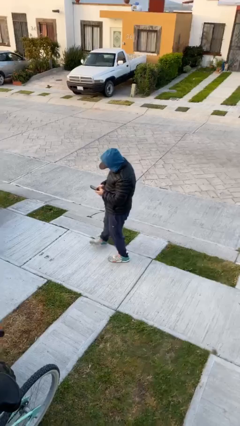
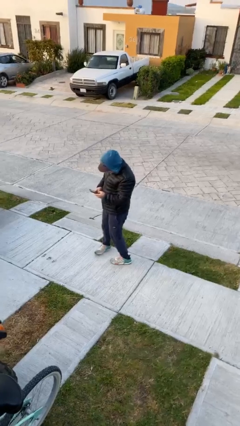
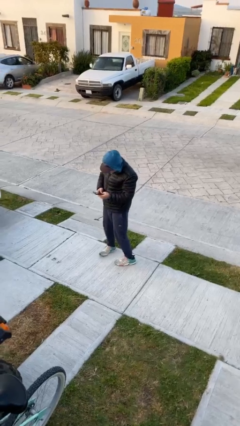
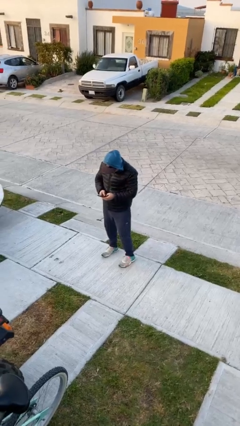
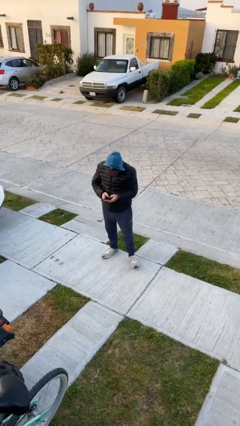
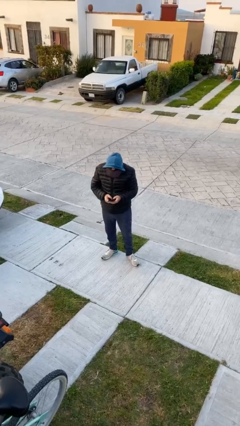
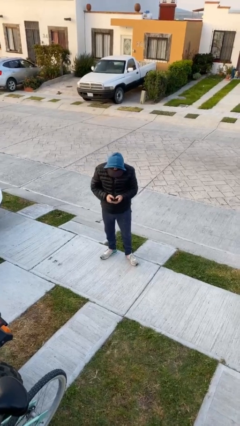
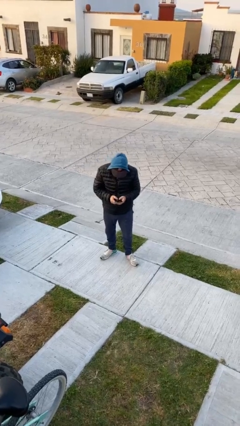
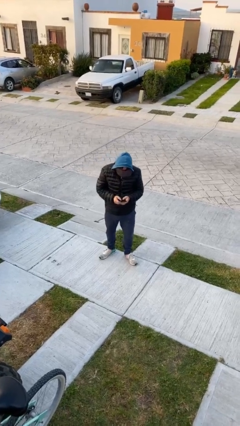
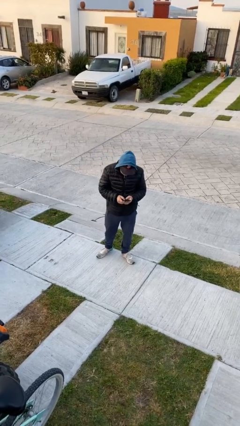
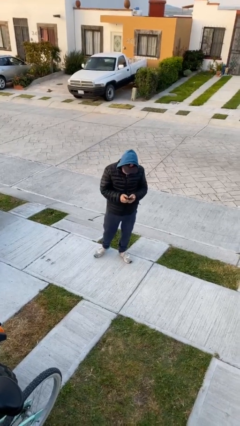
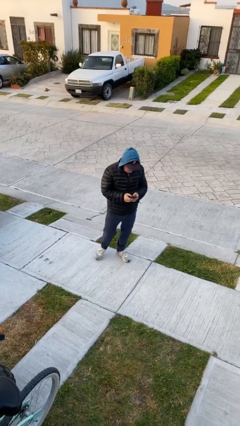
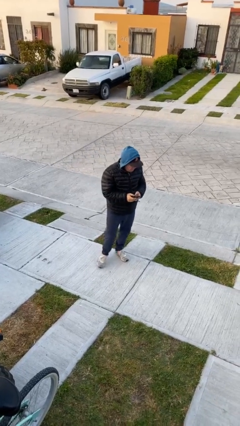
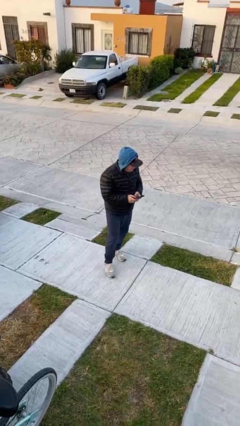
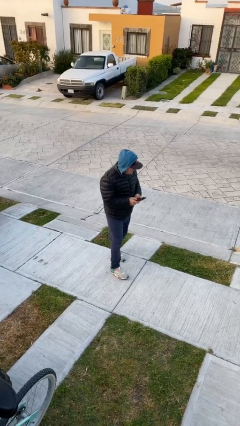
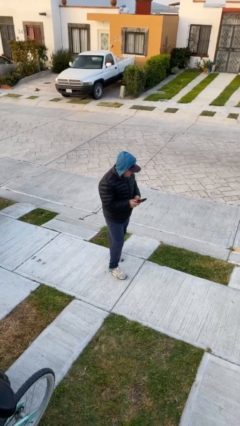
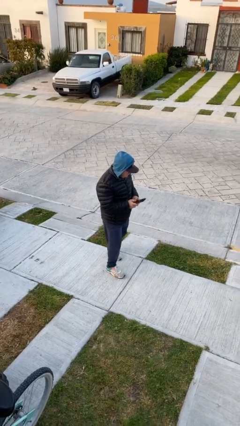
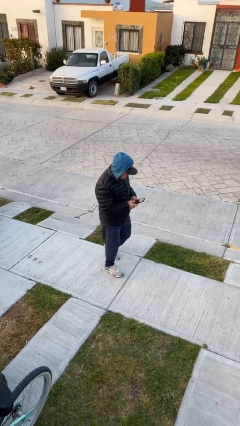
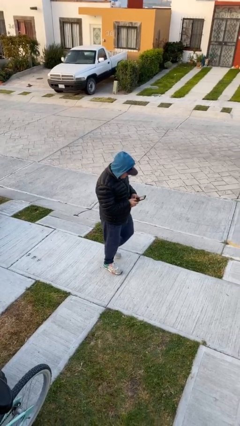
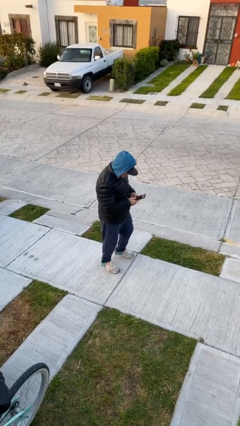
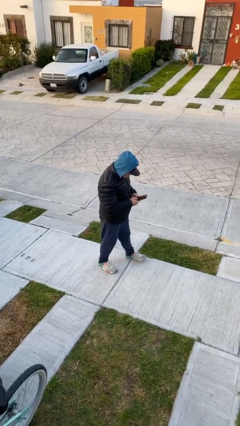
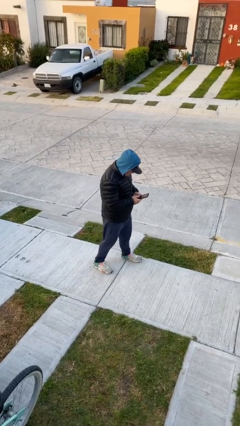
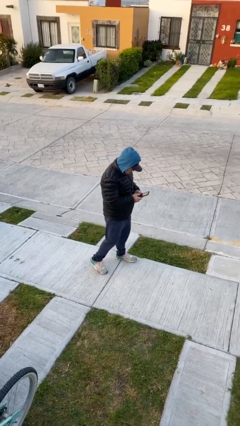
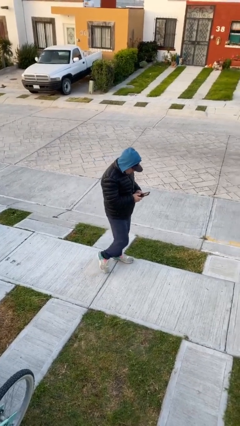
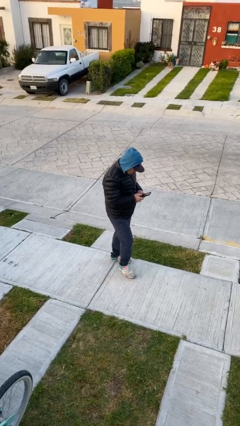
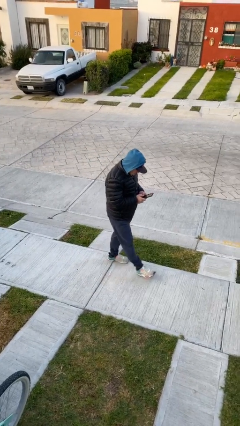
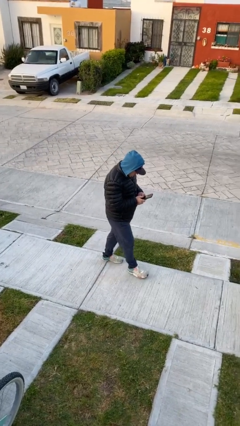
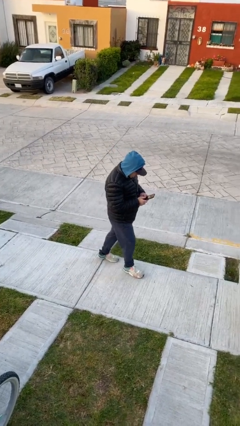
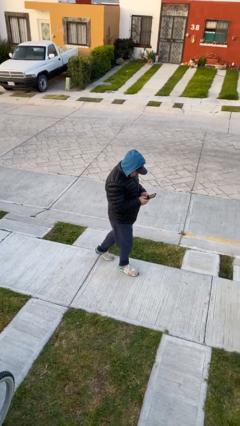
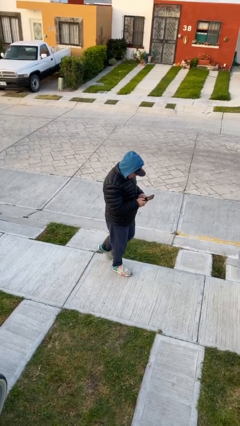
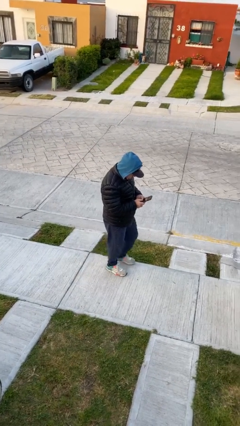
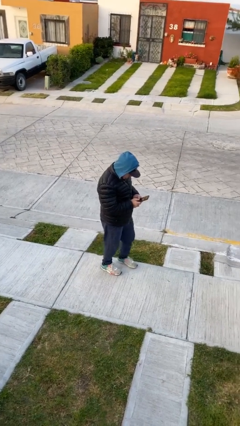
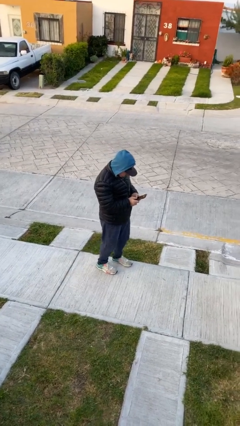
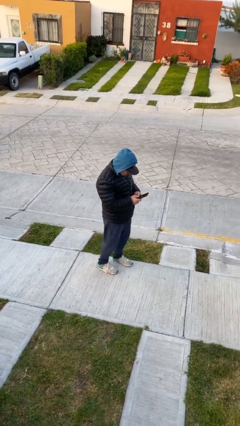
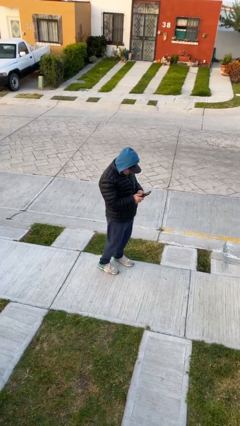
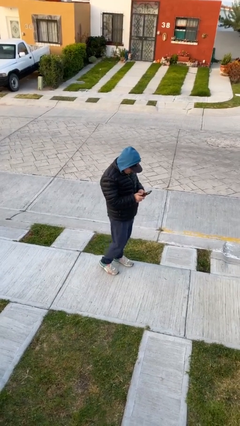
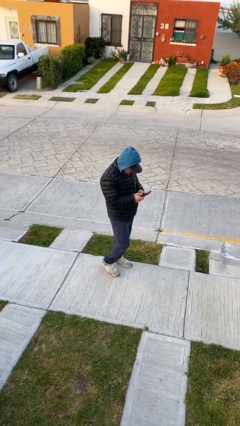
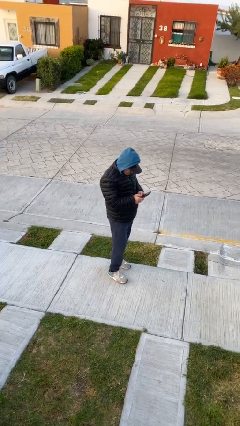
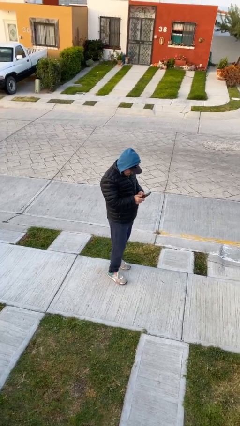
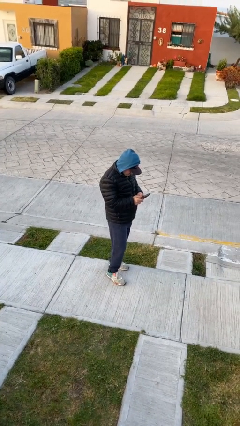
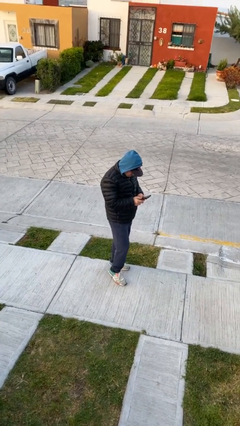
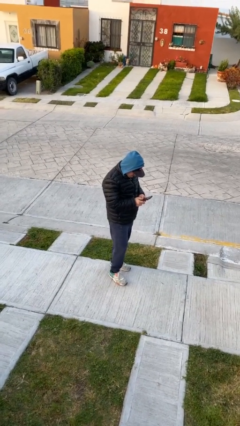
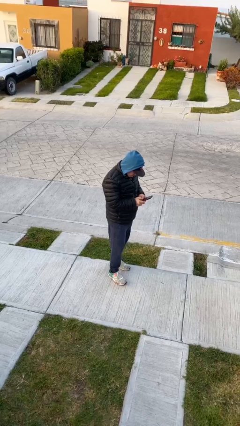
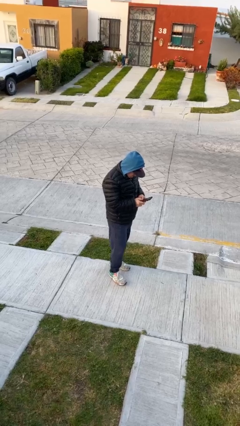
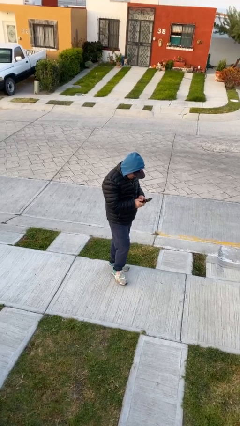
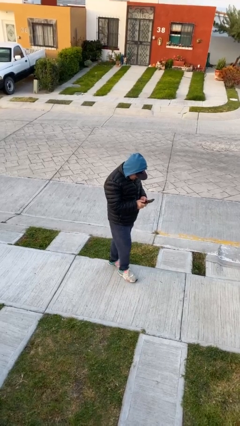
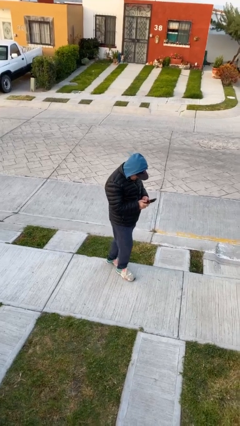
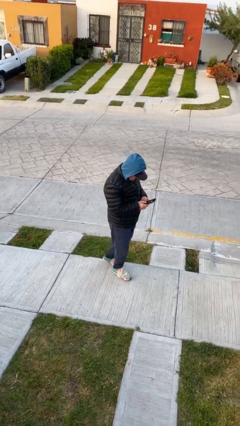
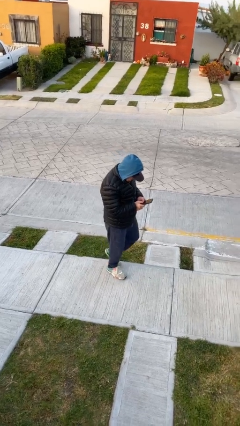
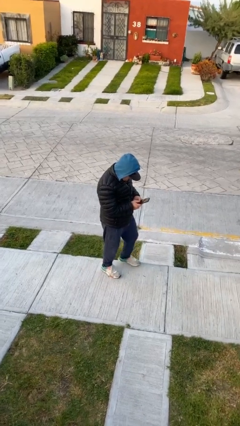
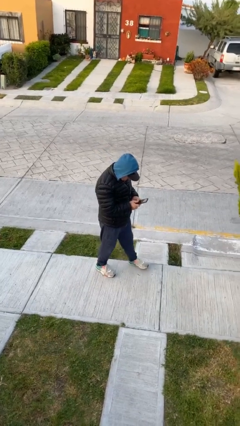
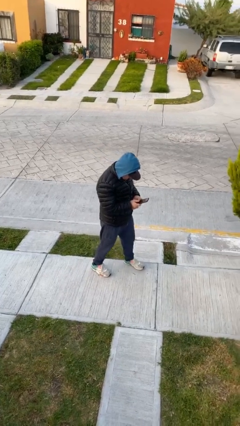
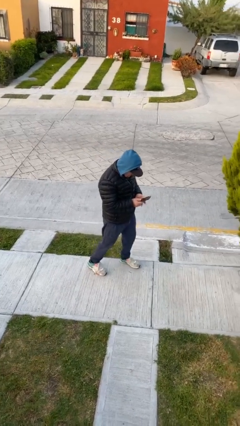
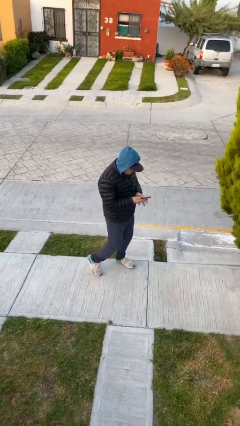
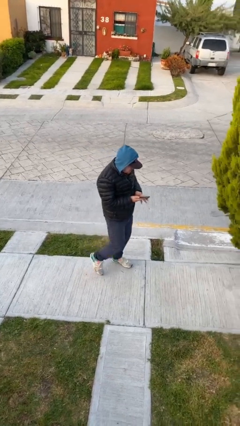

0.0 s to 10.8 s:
person texts on phone

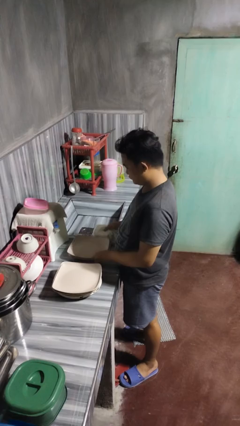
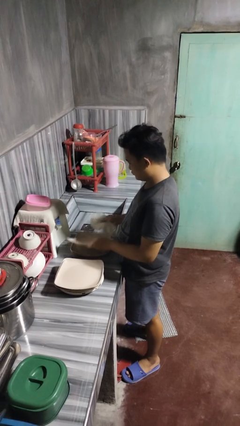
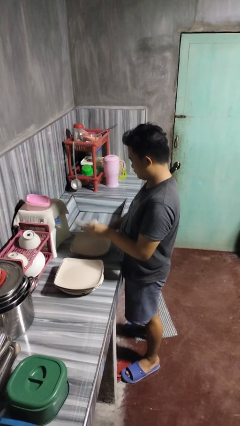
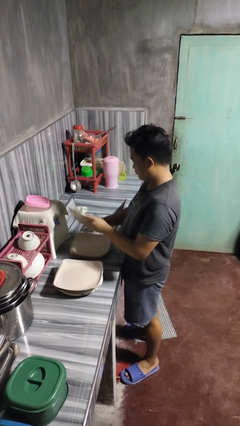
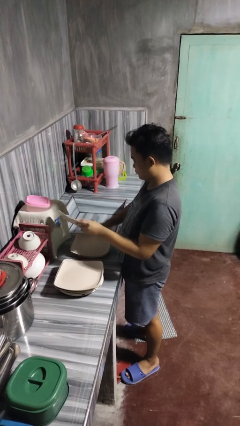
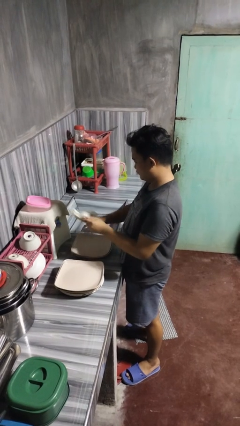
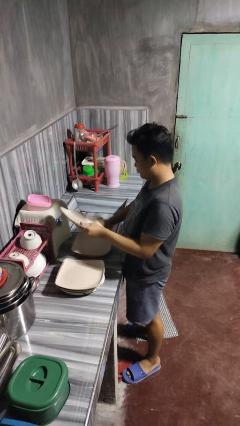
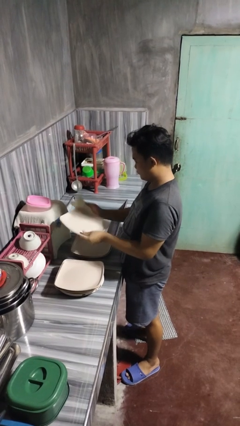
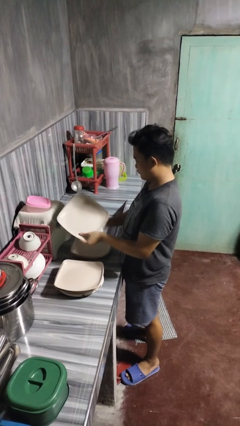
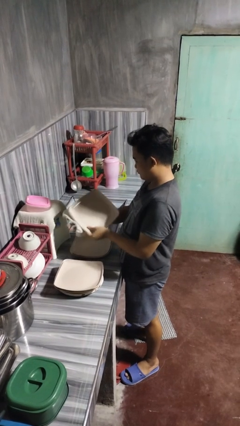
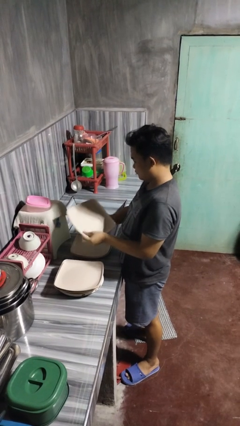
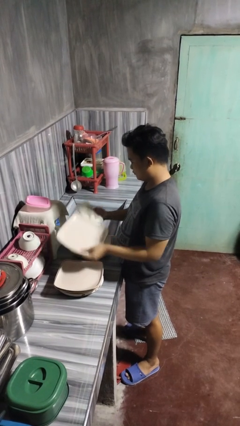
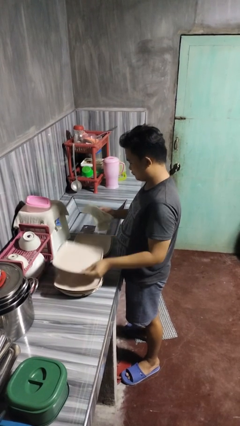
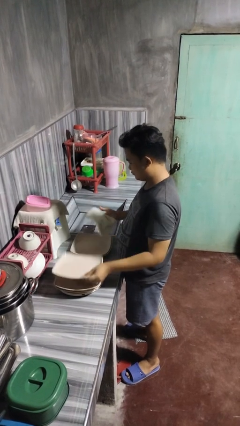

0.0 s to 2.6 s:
person dries dish

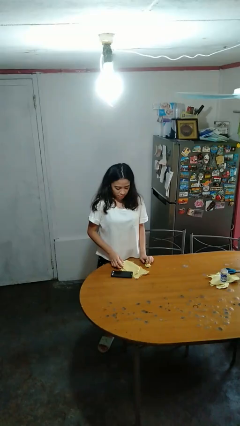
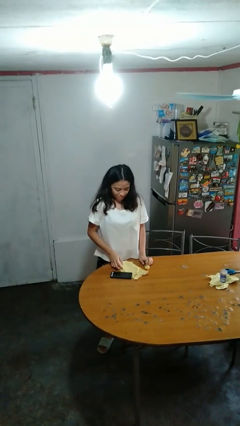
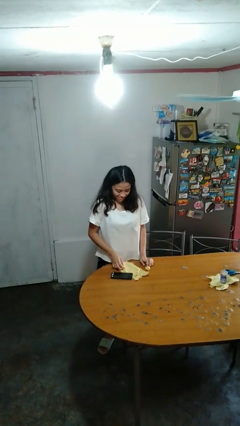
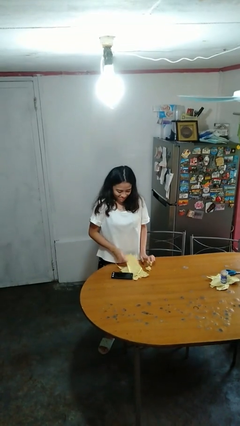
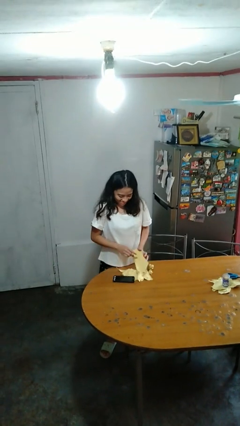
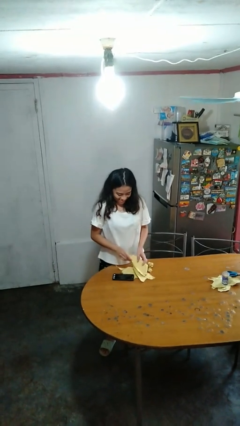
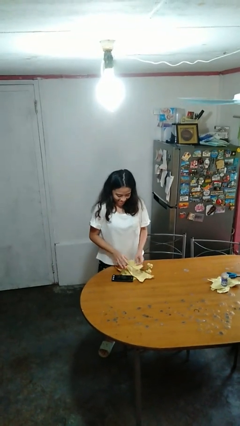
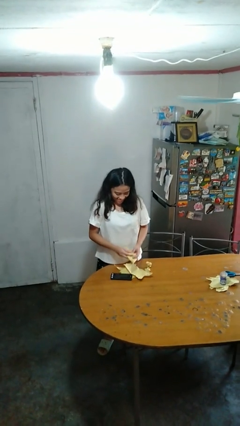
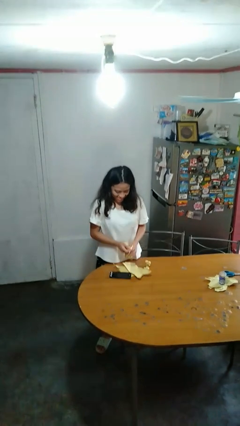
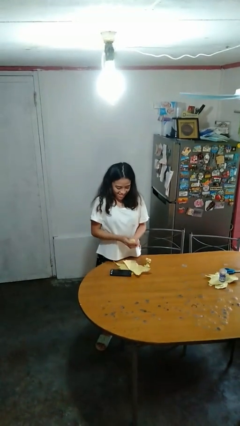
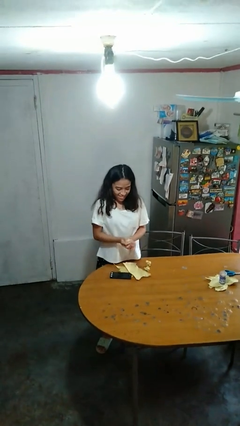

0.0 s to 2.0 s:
person crumples paper

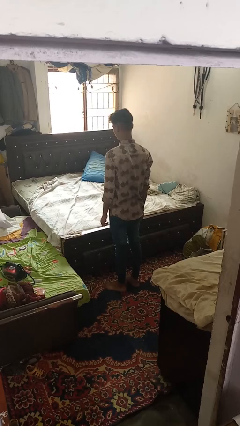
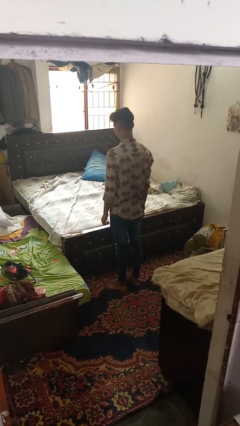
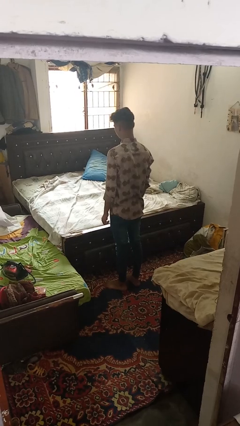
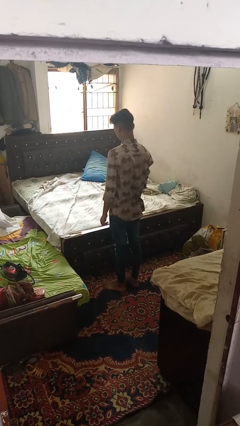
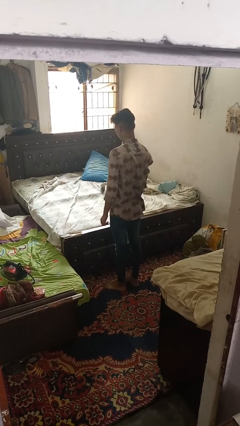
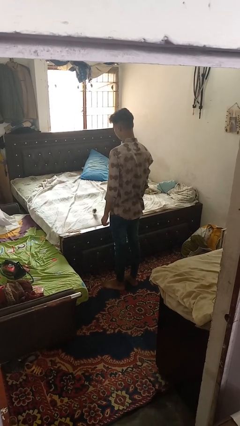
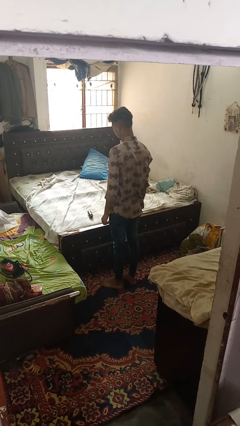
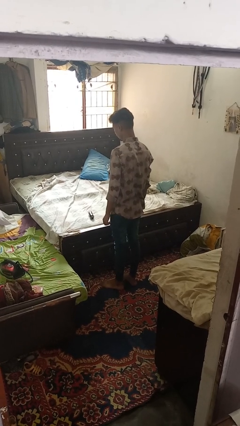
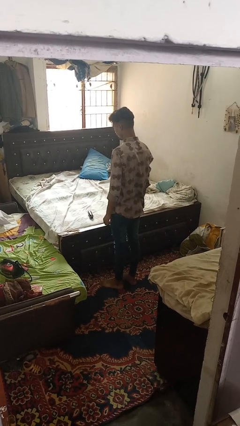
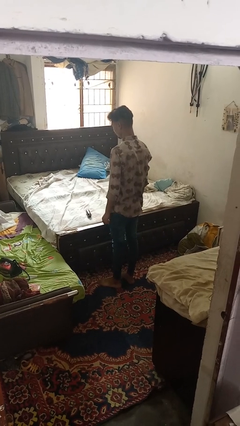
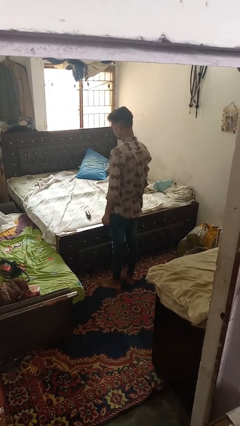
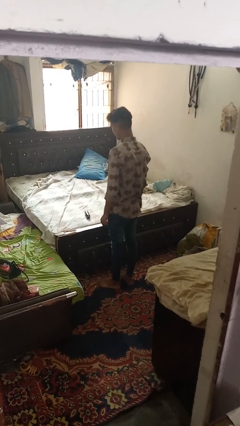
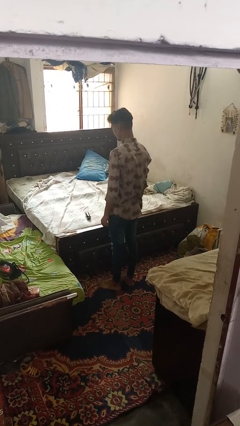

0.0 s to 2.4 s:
person throws object on bed
